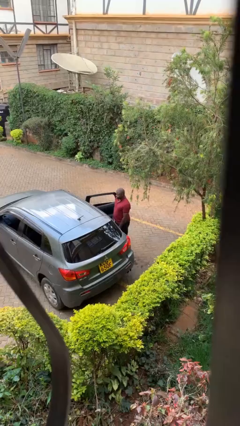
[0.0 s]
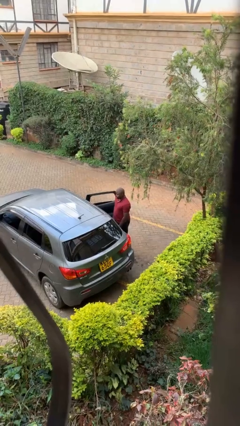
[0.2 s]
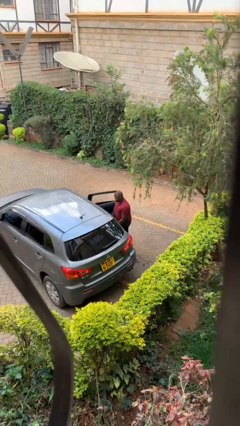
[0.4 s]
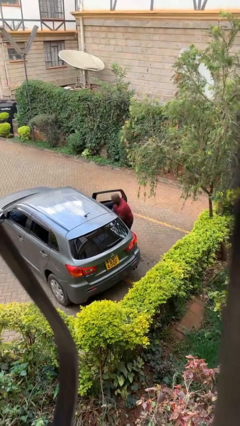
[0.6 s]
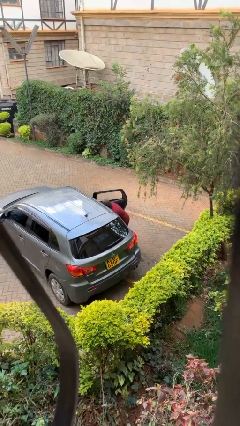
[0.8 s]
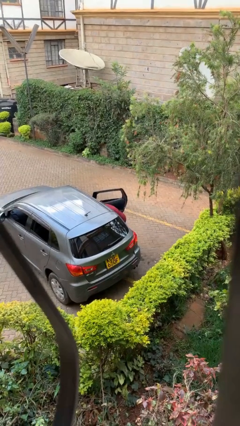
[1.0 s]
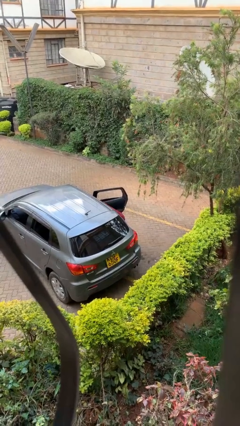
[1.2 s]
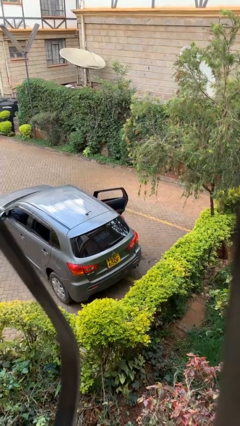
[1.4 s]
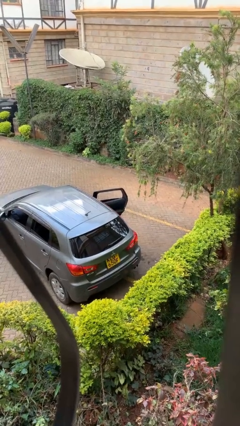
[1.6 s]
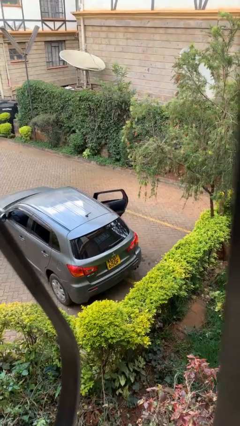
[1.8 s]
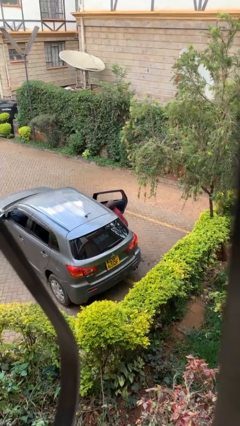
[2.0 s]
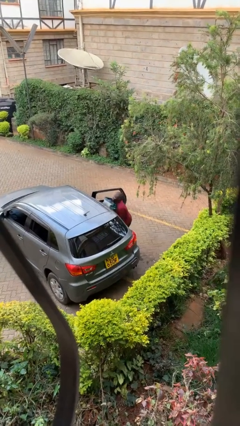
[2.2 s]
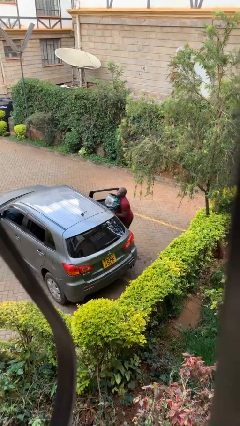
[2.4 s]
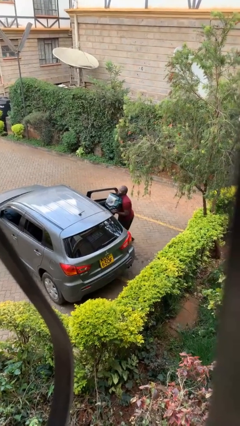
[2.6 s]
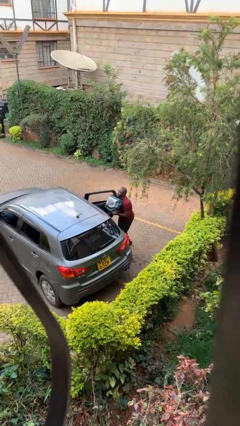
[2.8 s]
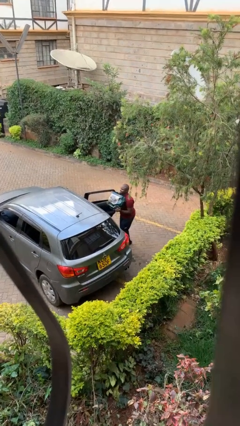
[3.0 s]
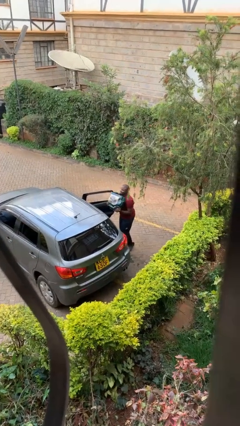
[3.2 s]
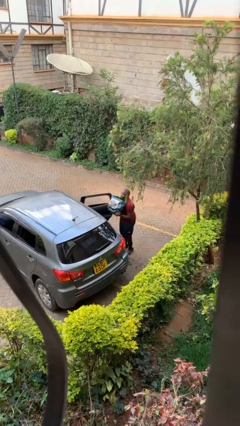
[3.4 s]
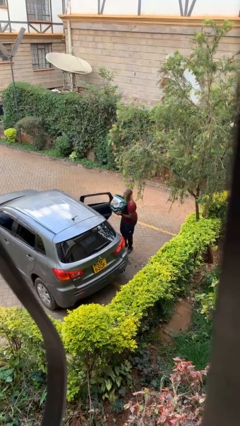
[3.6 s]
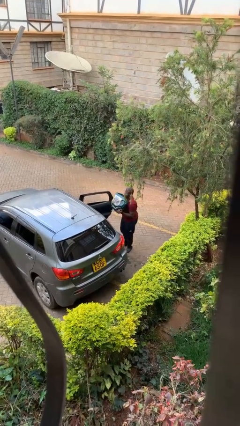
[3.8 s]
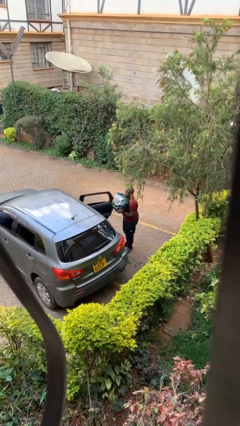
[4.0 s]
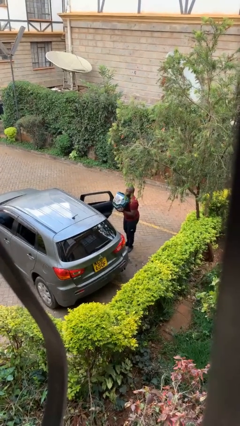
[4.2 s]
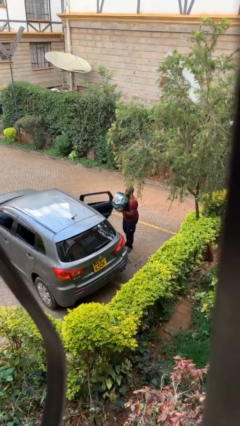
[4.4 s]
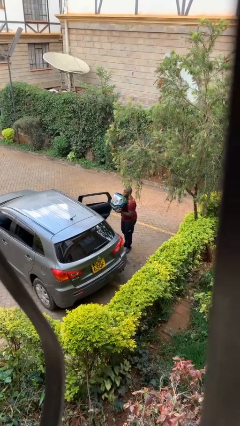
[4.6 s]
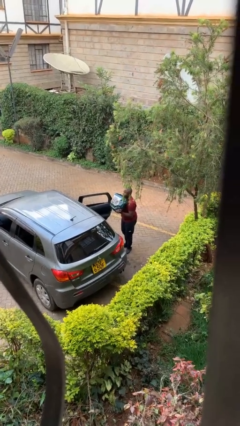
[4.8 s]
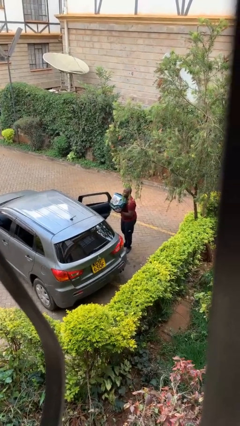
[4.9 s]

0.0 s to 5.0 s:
person unloads car

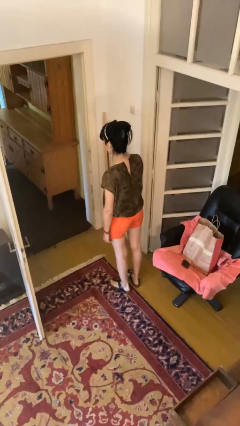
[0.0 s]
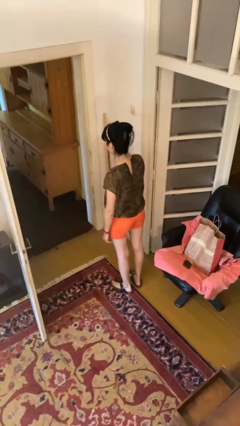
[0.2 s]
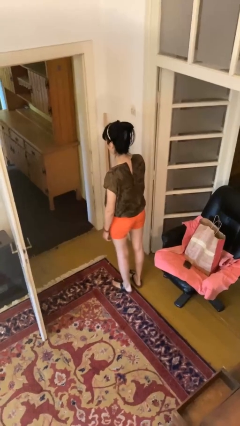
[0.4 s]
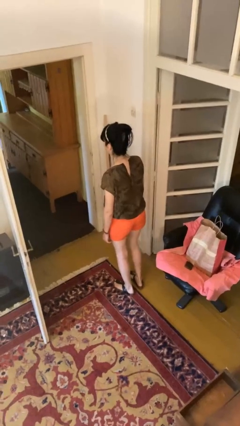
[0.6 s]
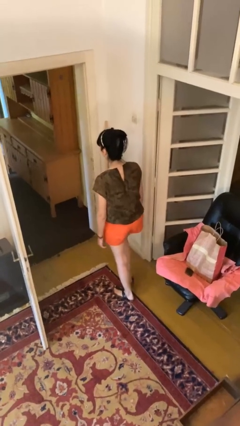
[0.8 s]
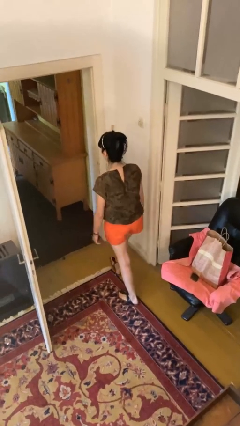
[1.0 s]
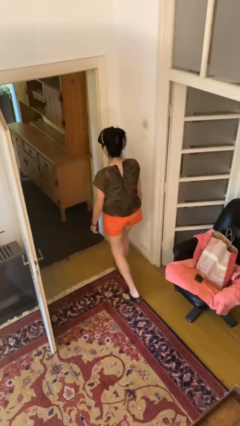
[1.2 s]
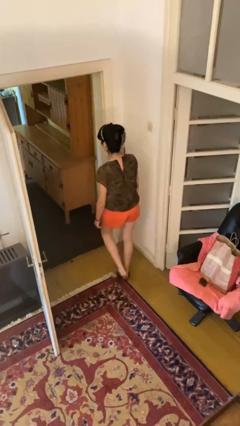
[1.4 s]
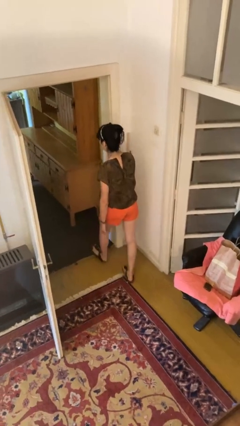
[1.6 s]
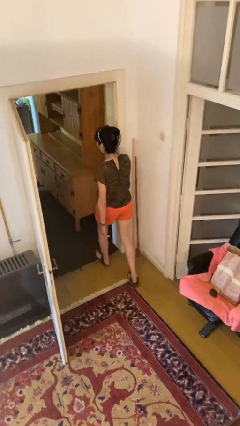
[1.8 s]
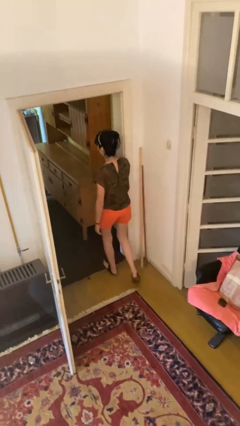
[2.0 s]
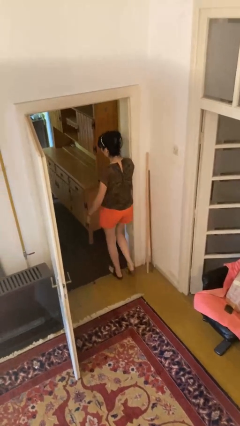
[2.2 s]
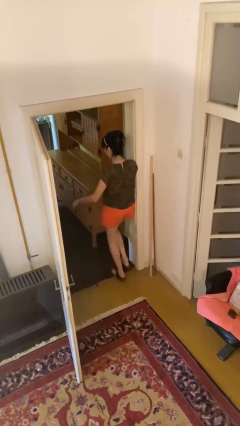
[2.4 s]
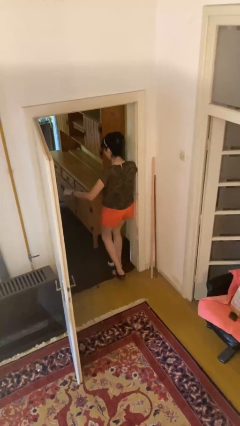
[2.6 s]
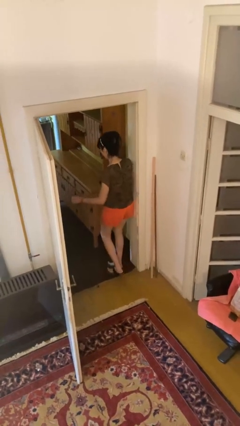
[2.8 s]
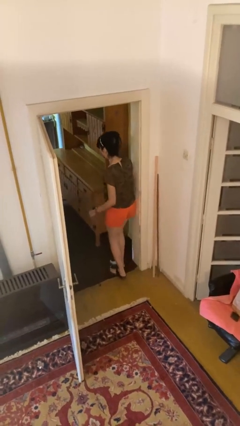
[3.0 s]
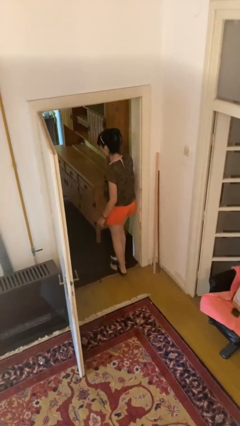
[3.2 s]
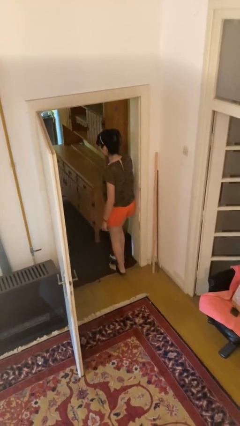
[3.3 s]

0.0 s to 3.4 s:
person bumps into wall

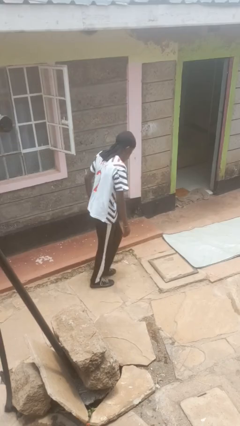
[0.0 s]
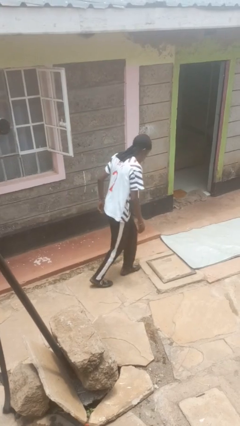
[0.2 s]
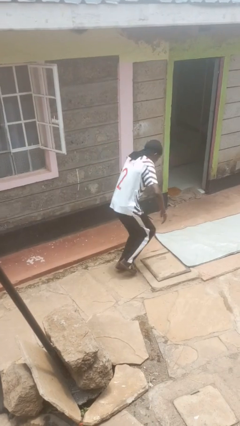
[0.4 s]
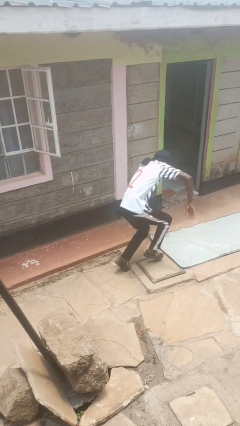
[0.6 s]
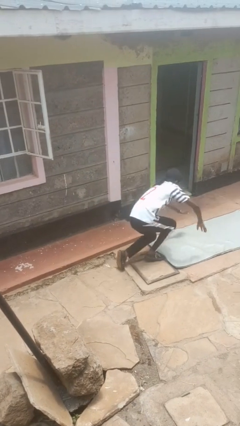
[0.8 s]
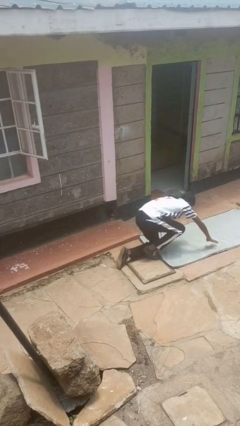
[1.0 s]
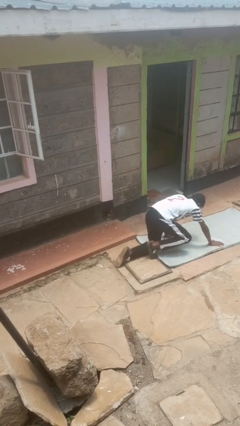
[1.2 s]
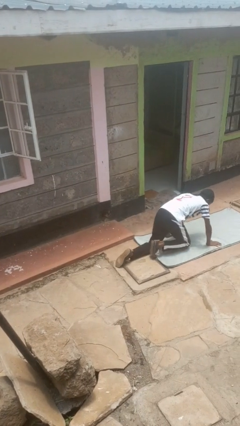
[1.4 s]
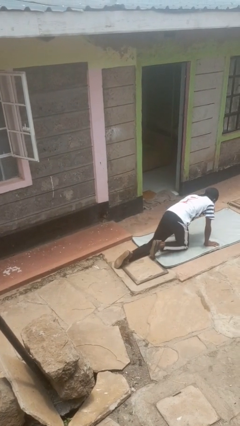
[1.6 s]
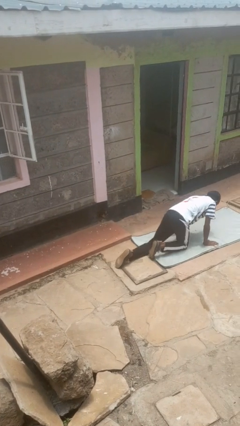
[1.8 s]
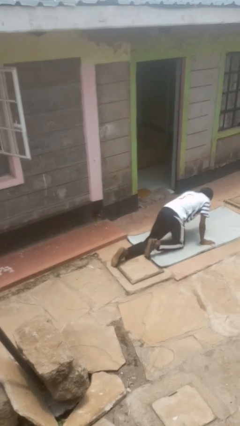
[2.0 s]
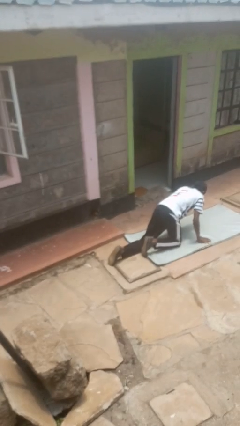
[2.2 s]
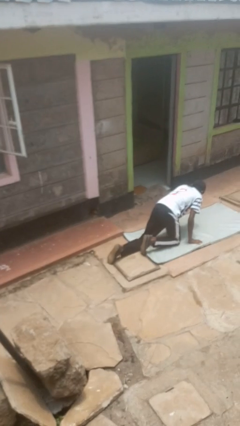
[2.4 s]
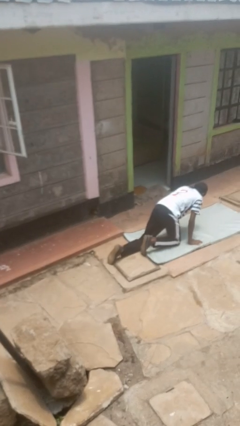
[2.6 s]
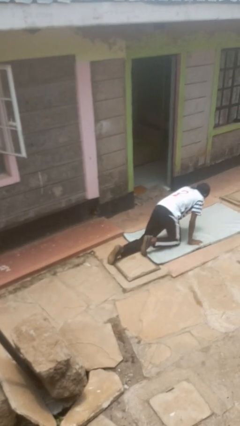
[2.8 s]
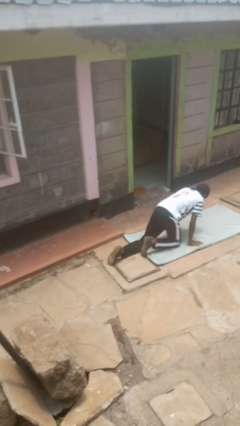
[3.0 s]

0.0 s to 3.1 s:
person trips on object on floor

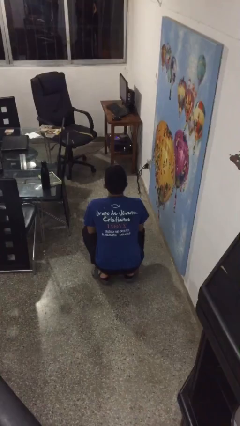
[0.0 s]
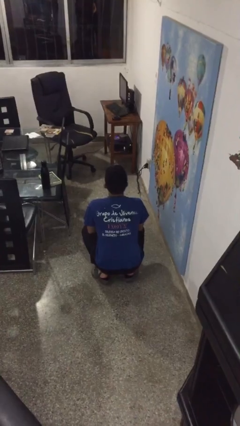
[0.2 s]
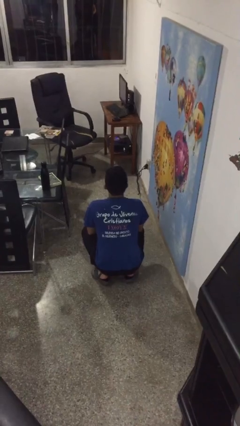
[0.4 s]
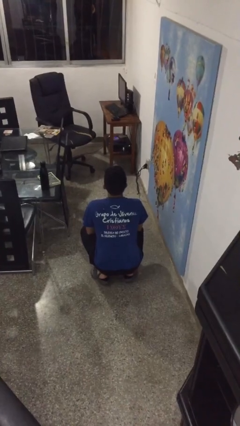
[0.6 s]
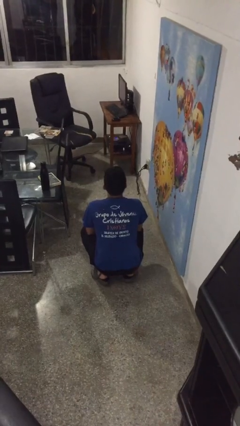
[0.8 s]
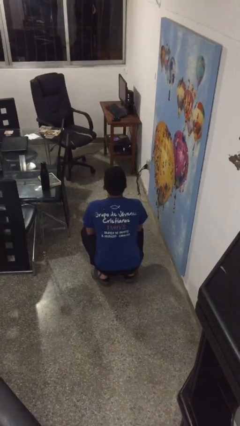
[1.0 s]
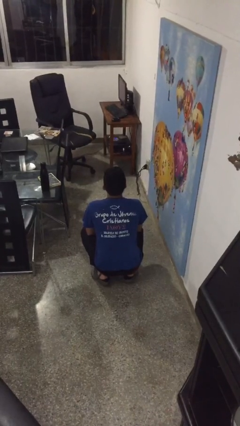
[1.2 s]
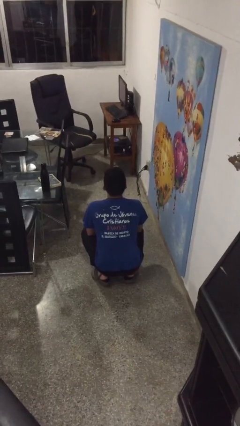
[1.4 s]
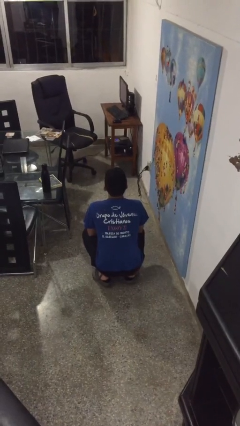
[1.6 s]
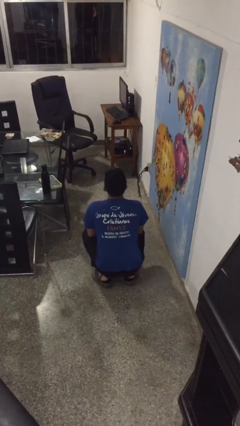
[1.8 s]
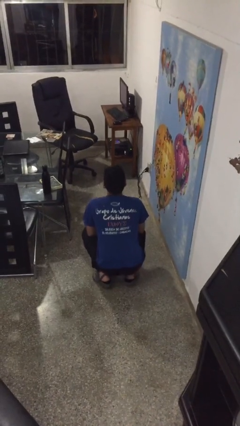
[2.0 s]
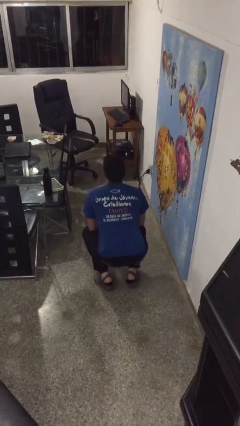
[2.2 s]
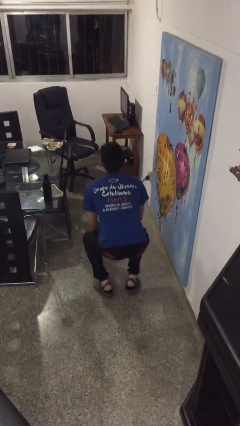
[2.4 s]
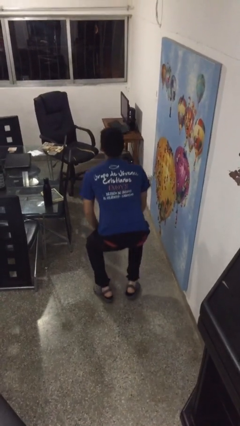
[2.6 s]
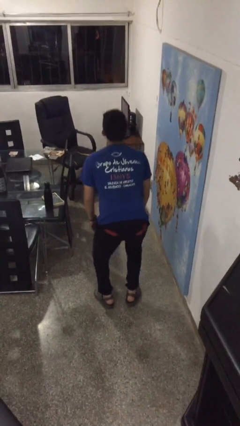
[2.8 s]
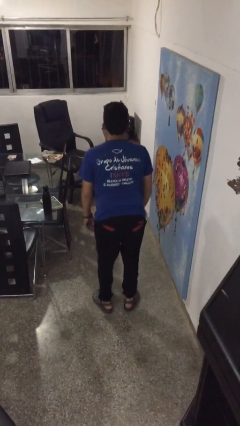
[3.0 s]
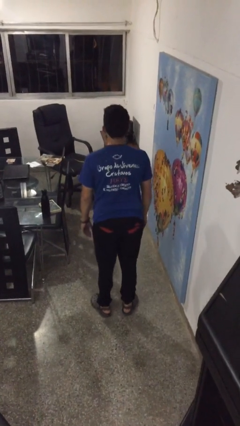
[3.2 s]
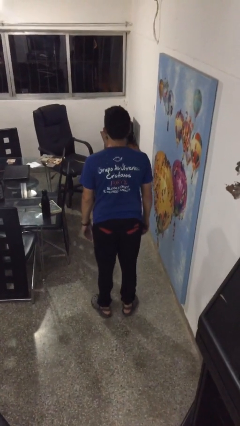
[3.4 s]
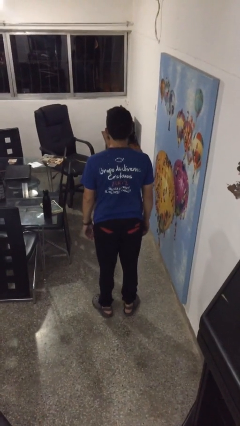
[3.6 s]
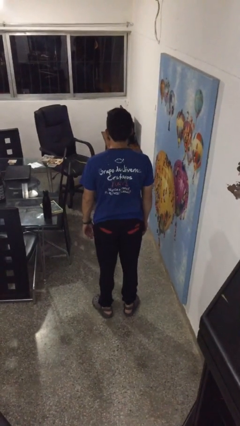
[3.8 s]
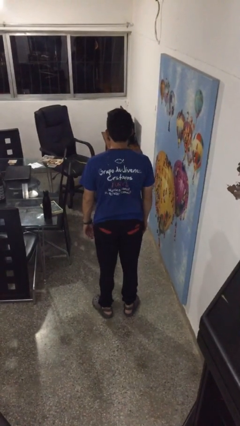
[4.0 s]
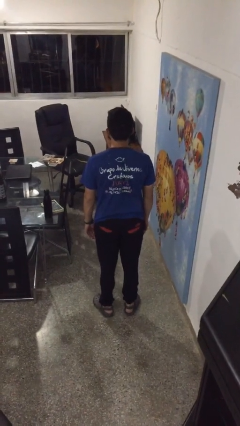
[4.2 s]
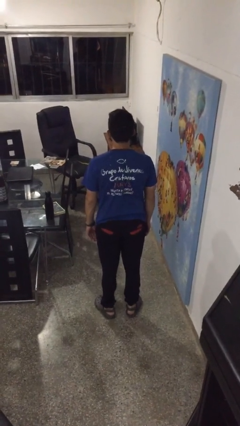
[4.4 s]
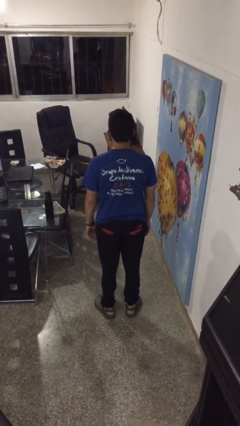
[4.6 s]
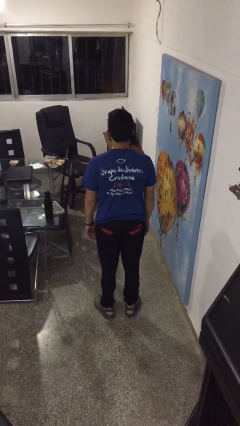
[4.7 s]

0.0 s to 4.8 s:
person stands up

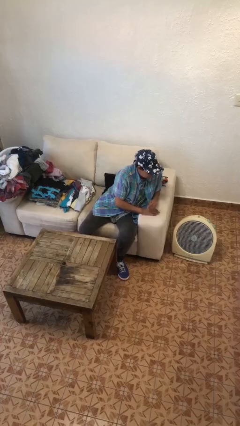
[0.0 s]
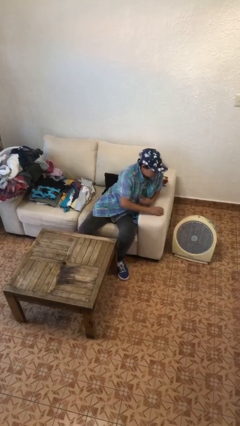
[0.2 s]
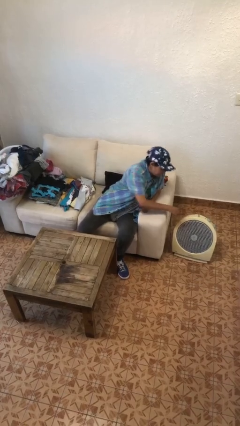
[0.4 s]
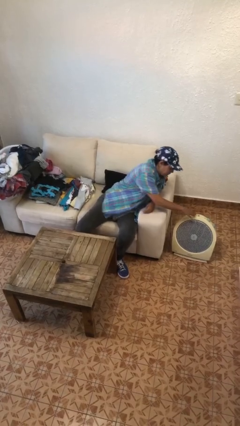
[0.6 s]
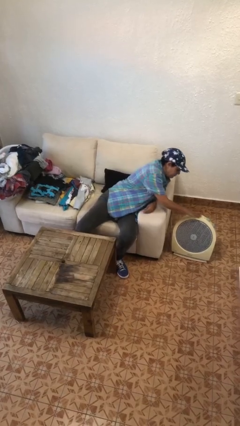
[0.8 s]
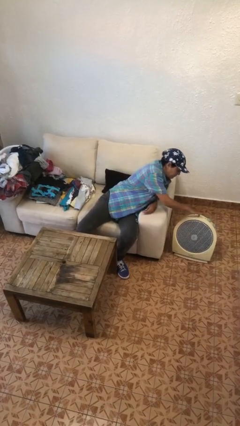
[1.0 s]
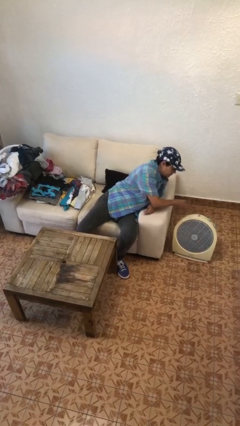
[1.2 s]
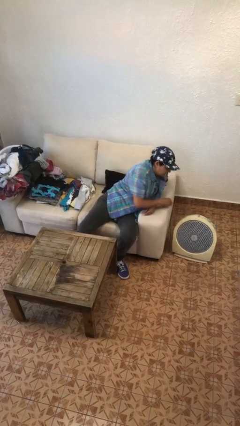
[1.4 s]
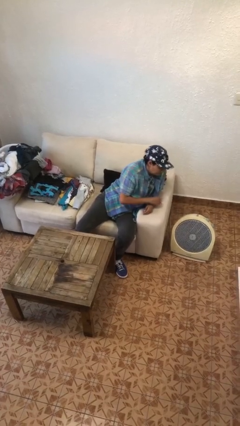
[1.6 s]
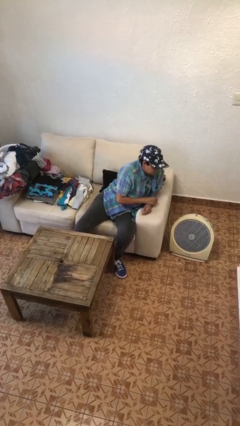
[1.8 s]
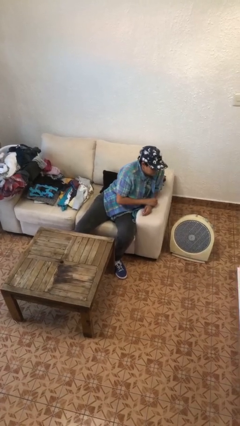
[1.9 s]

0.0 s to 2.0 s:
person turns off fan
